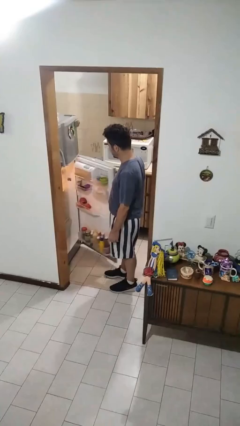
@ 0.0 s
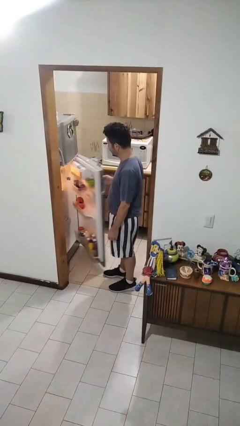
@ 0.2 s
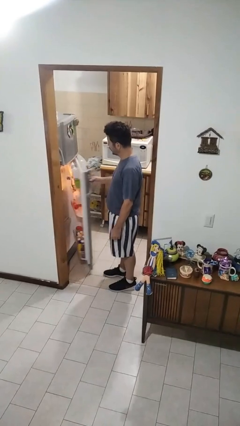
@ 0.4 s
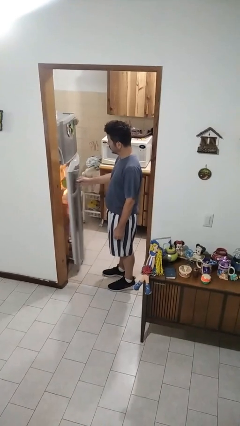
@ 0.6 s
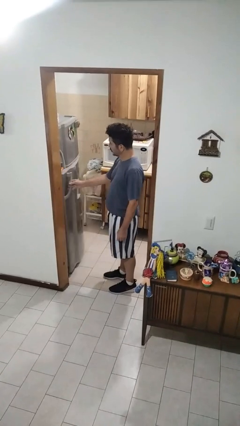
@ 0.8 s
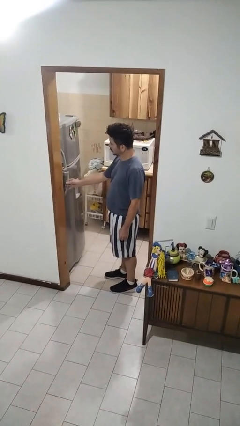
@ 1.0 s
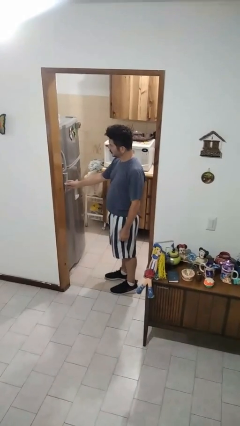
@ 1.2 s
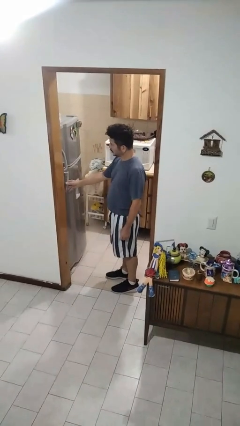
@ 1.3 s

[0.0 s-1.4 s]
person closes refrigerator

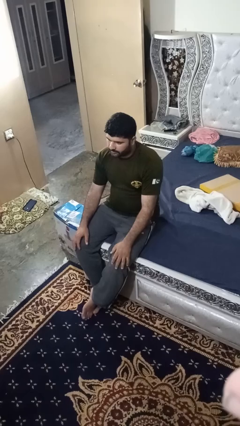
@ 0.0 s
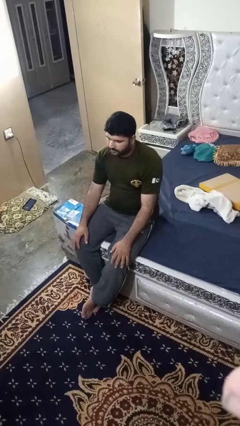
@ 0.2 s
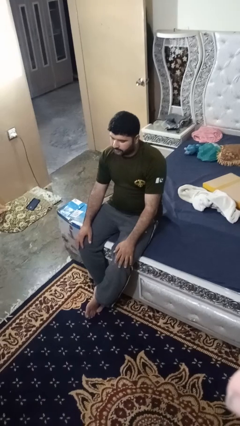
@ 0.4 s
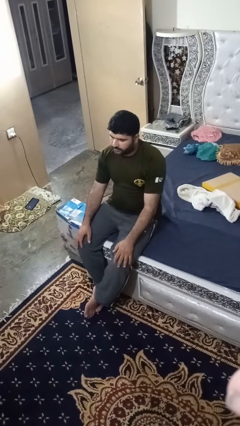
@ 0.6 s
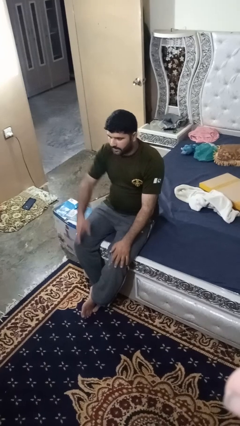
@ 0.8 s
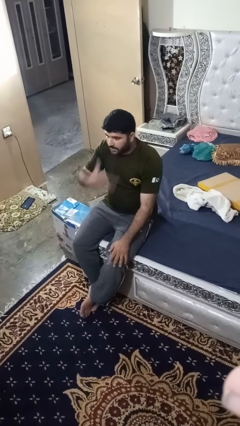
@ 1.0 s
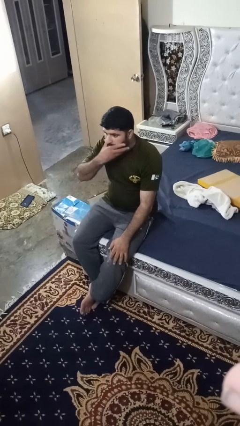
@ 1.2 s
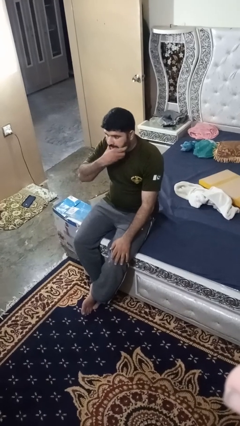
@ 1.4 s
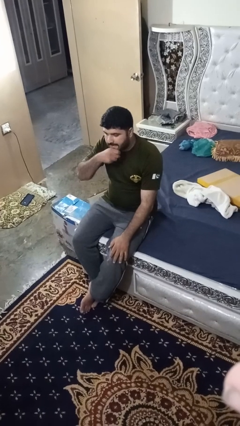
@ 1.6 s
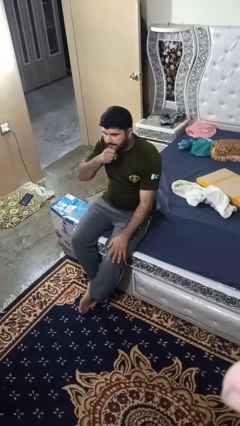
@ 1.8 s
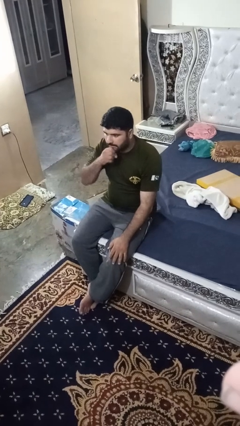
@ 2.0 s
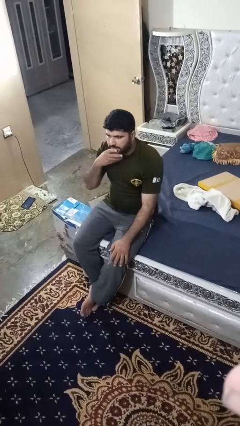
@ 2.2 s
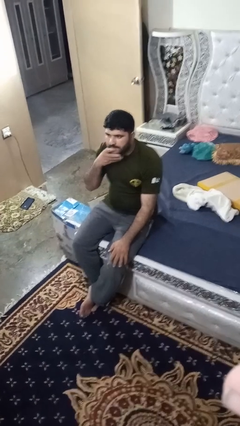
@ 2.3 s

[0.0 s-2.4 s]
person strokes chin

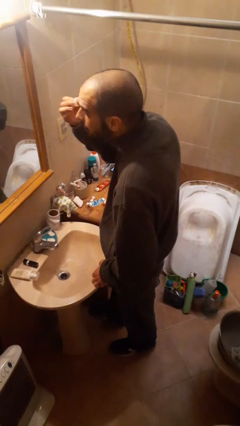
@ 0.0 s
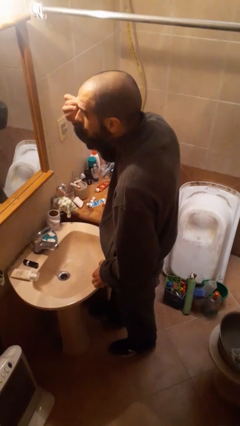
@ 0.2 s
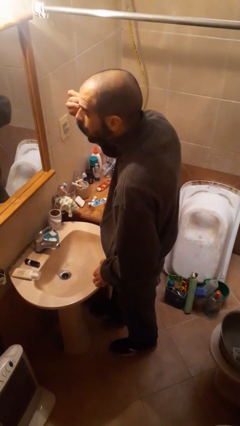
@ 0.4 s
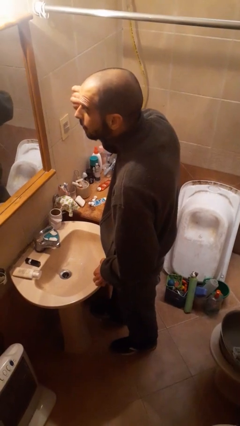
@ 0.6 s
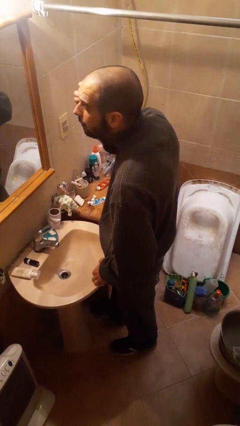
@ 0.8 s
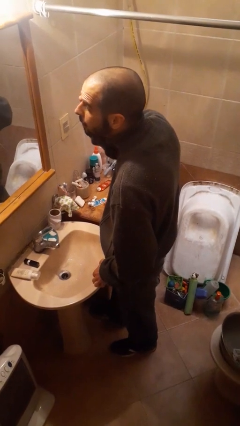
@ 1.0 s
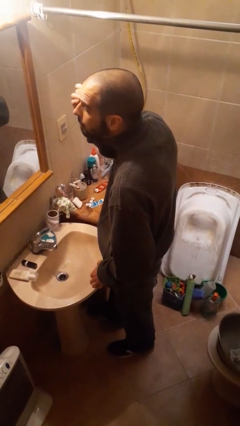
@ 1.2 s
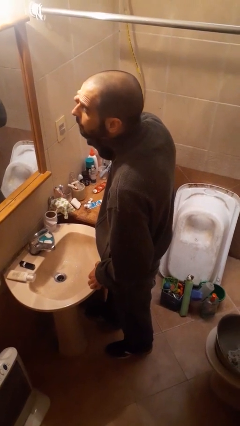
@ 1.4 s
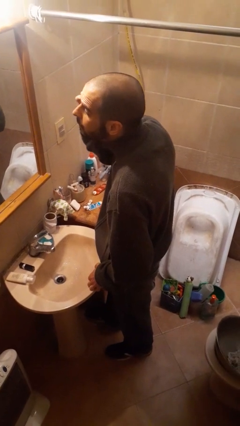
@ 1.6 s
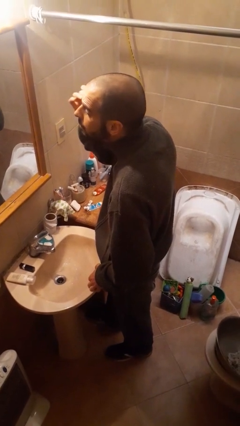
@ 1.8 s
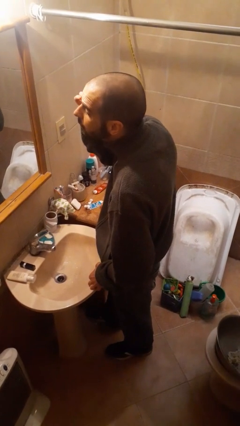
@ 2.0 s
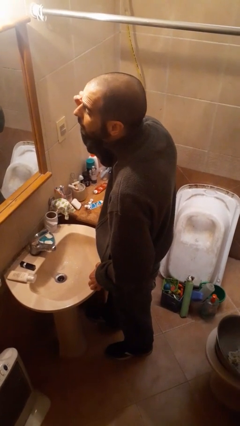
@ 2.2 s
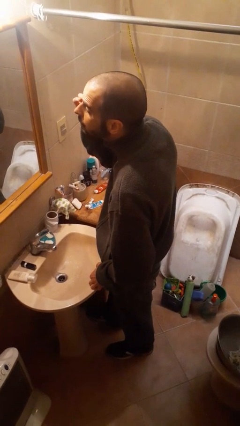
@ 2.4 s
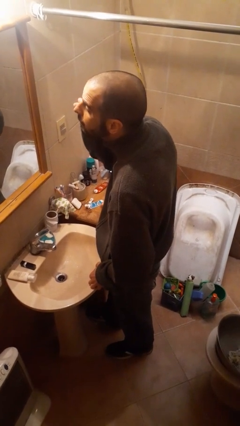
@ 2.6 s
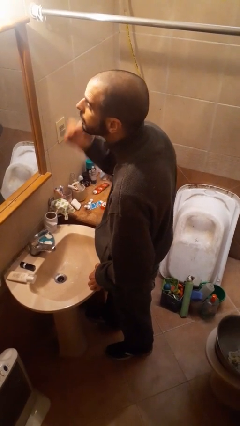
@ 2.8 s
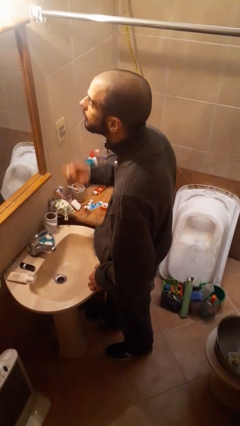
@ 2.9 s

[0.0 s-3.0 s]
person applies eye makeup

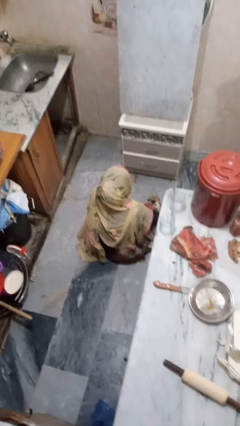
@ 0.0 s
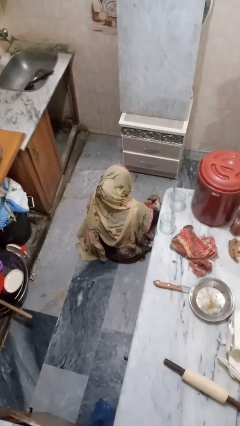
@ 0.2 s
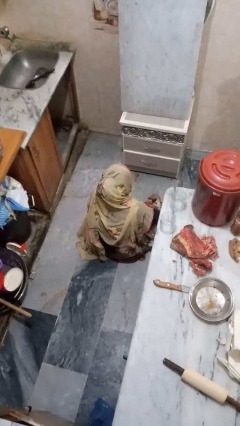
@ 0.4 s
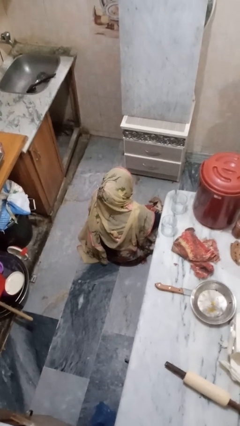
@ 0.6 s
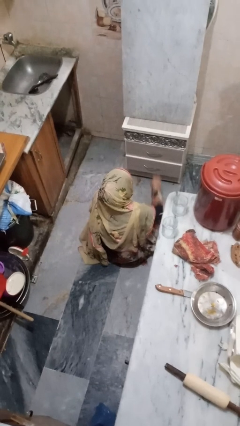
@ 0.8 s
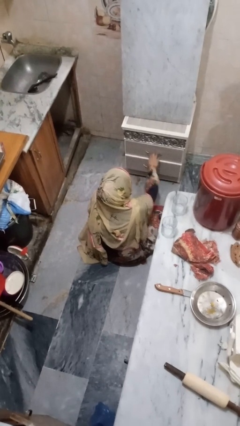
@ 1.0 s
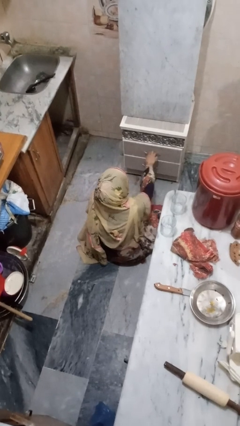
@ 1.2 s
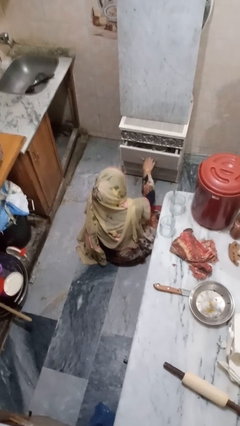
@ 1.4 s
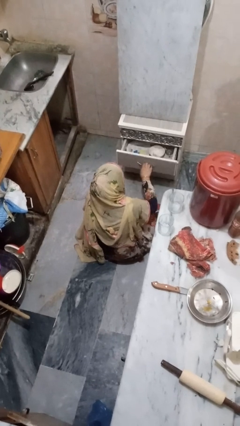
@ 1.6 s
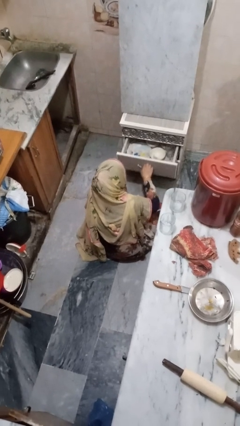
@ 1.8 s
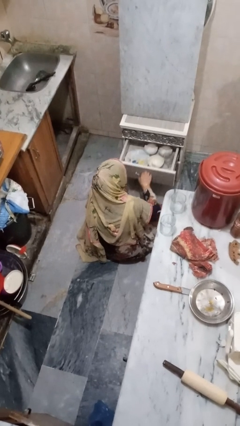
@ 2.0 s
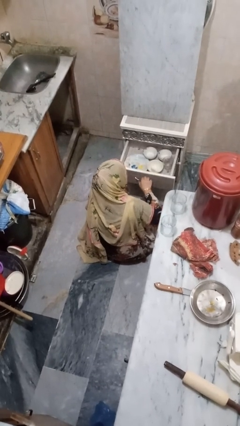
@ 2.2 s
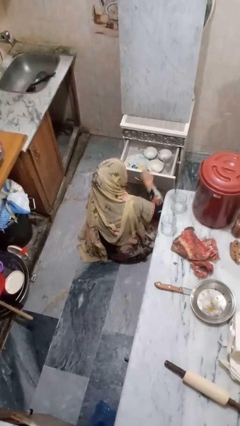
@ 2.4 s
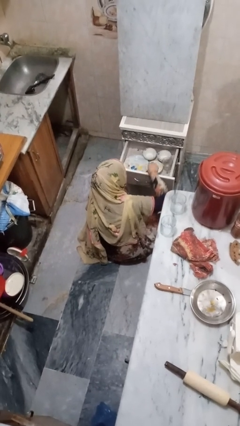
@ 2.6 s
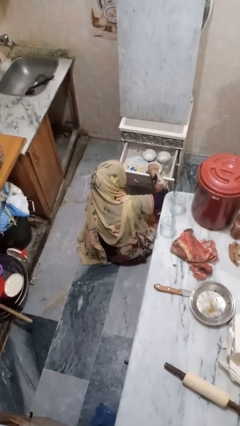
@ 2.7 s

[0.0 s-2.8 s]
person searches in kitchen drawer

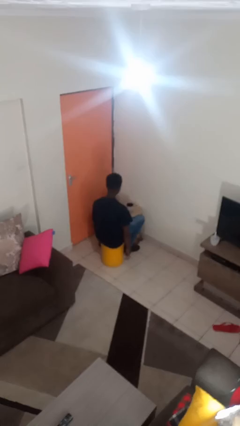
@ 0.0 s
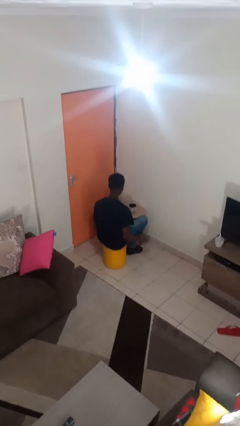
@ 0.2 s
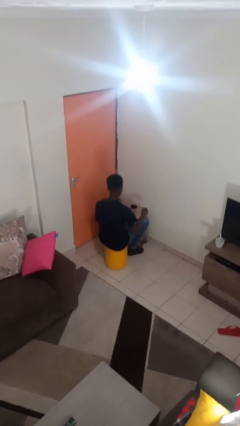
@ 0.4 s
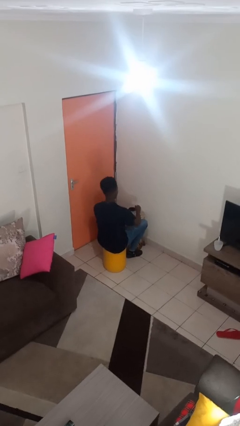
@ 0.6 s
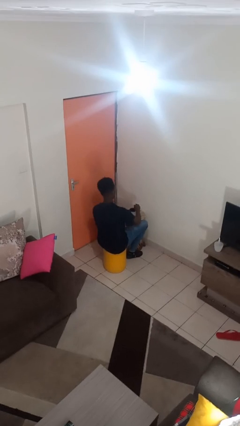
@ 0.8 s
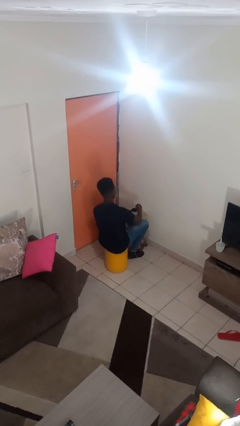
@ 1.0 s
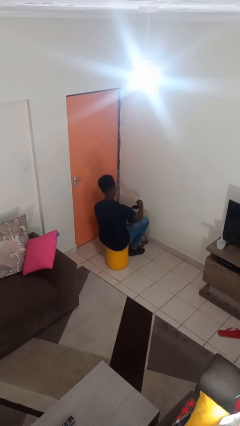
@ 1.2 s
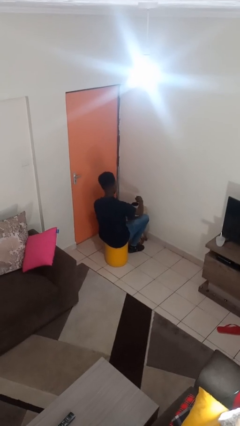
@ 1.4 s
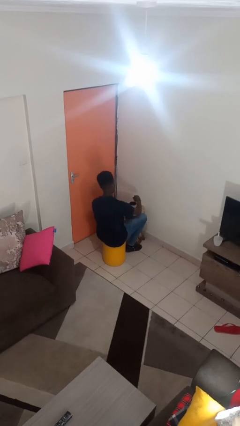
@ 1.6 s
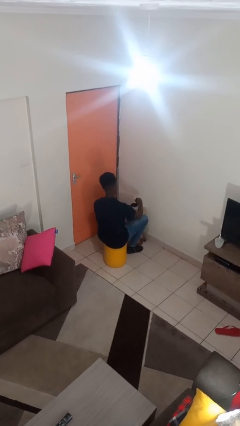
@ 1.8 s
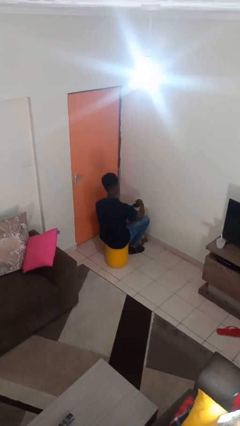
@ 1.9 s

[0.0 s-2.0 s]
person stirs mug

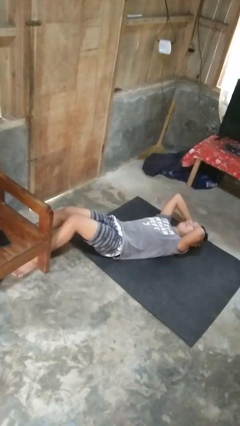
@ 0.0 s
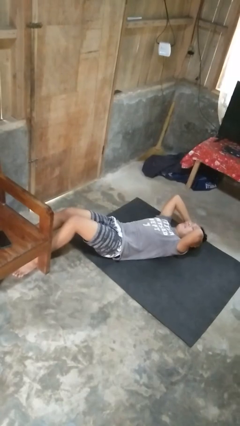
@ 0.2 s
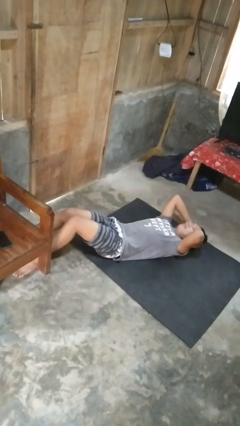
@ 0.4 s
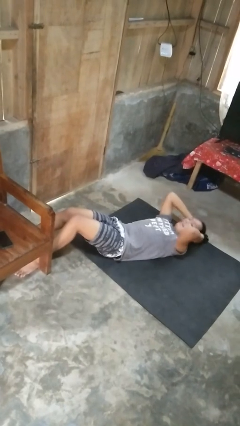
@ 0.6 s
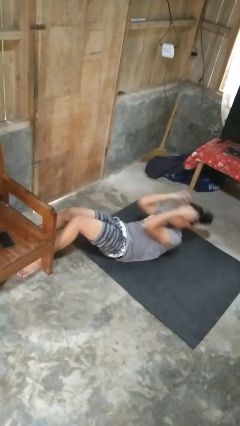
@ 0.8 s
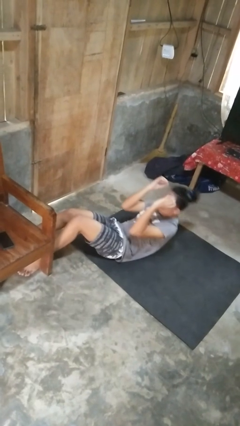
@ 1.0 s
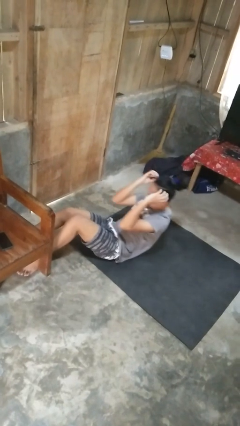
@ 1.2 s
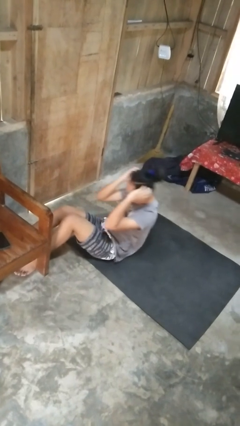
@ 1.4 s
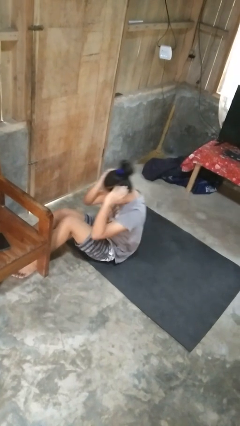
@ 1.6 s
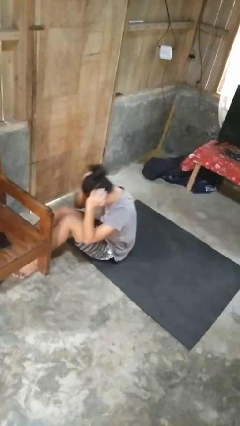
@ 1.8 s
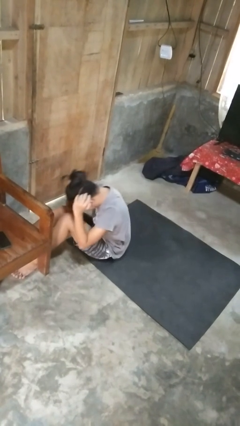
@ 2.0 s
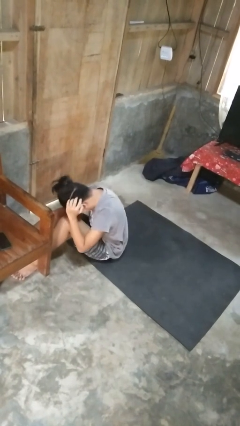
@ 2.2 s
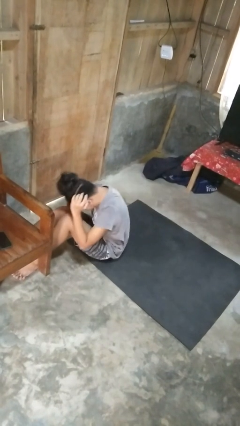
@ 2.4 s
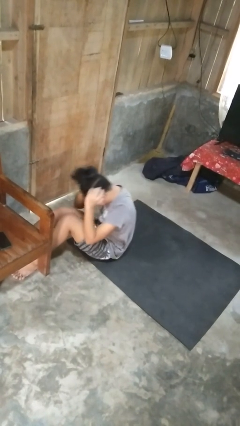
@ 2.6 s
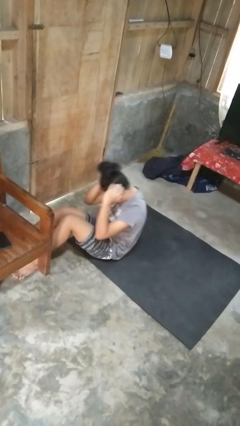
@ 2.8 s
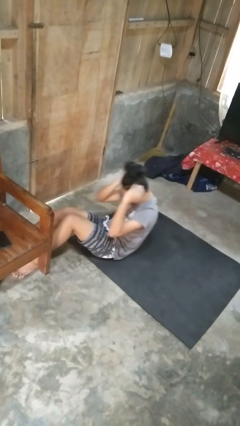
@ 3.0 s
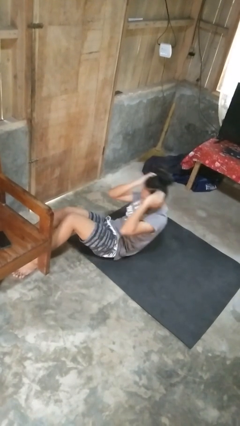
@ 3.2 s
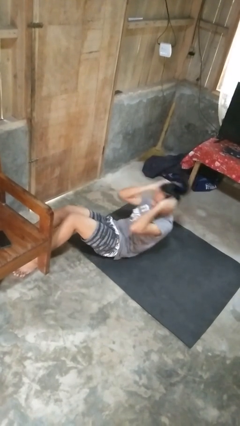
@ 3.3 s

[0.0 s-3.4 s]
person exercises with situp

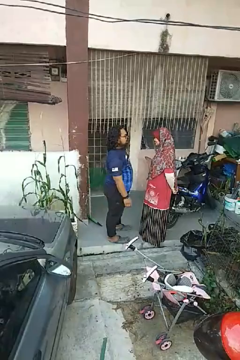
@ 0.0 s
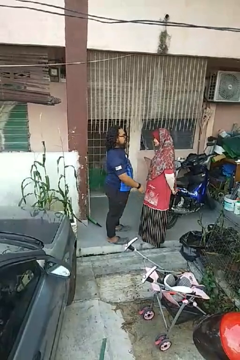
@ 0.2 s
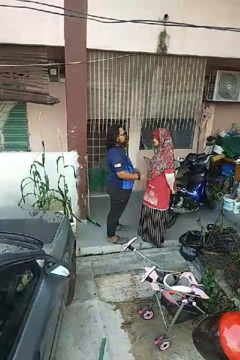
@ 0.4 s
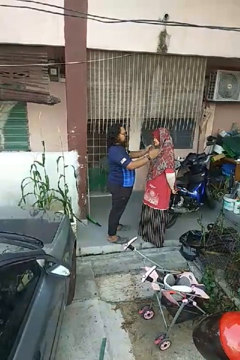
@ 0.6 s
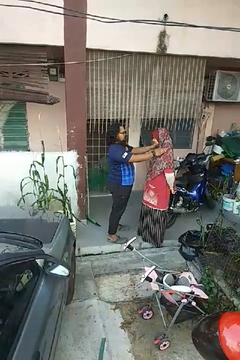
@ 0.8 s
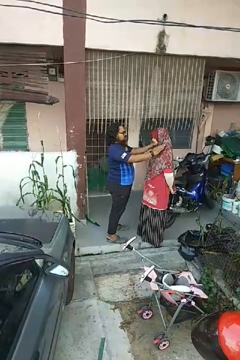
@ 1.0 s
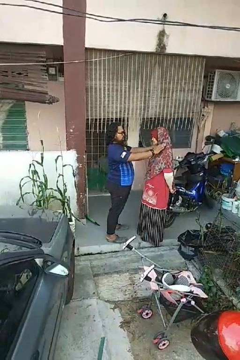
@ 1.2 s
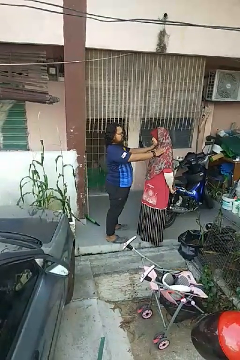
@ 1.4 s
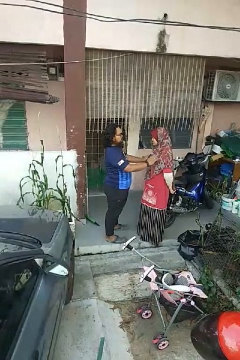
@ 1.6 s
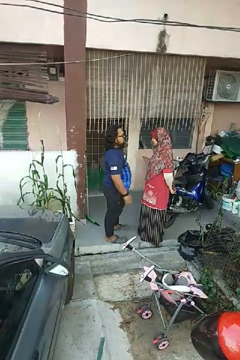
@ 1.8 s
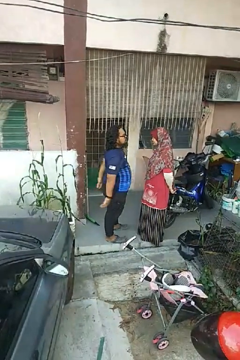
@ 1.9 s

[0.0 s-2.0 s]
person pounds shoulders of person

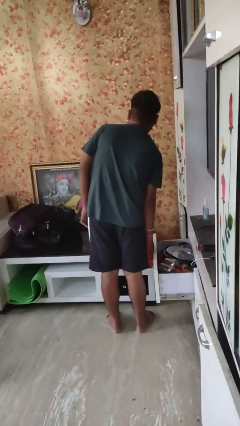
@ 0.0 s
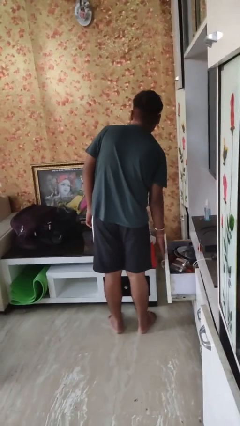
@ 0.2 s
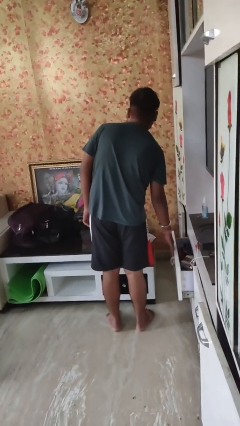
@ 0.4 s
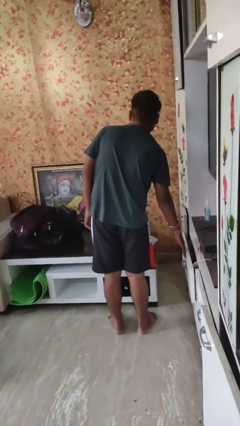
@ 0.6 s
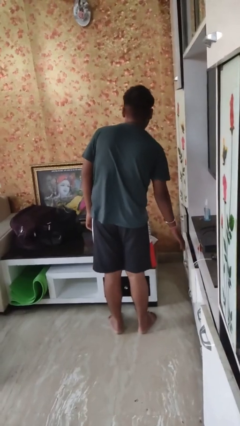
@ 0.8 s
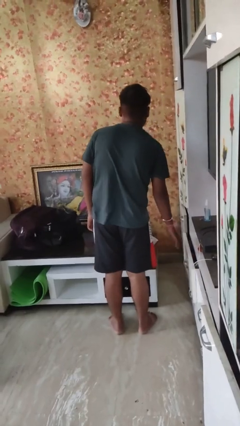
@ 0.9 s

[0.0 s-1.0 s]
person closes kitchen drawer
